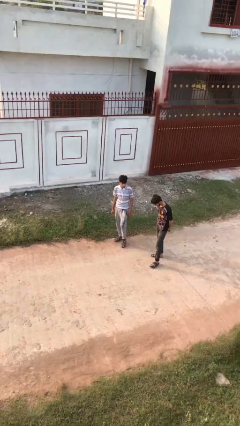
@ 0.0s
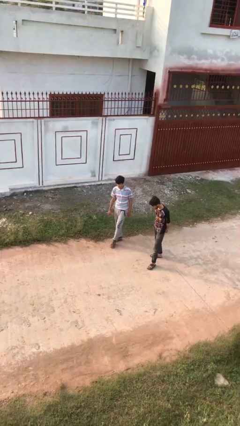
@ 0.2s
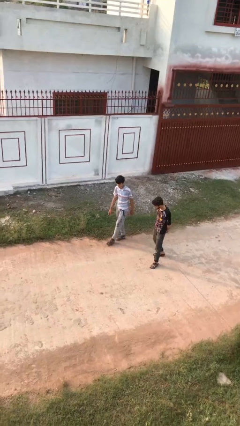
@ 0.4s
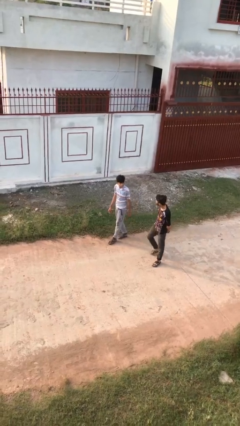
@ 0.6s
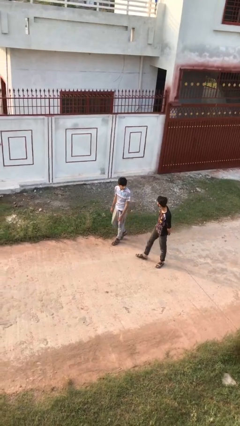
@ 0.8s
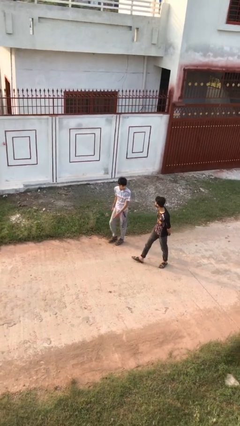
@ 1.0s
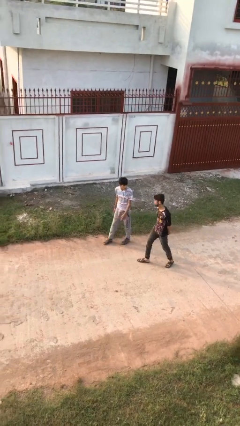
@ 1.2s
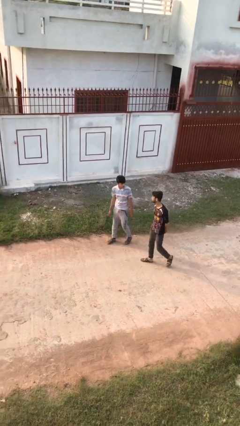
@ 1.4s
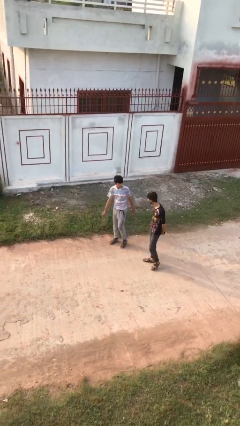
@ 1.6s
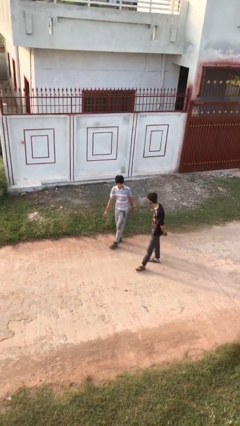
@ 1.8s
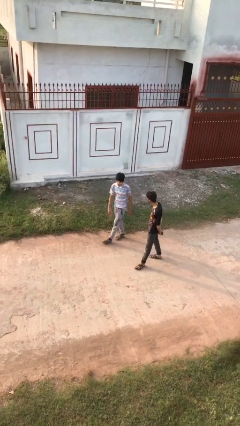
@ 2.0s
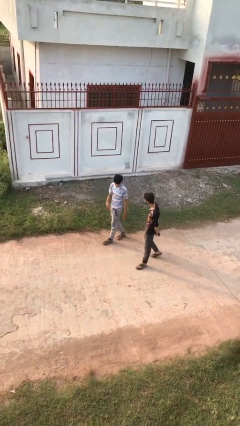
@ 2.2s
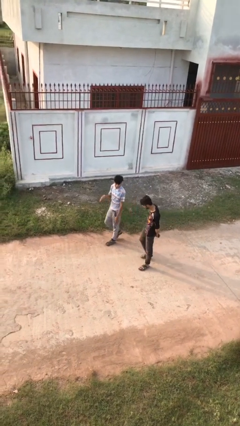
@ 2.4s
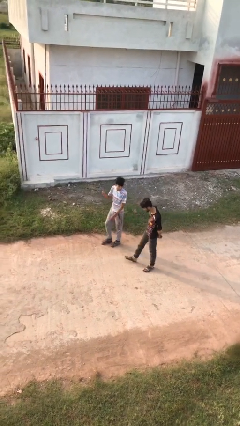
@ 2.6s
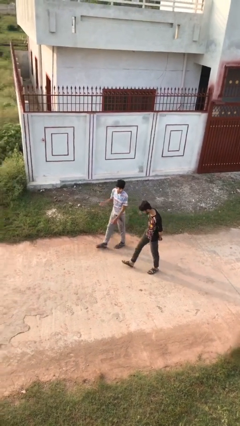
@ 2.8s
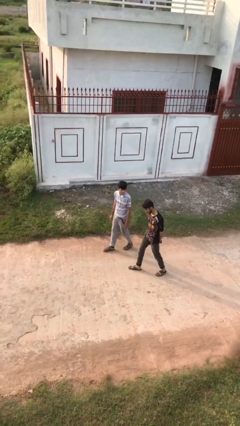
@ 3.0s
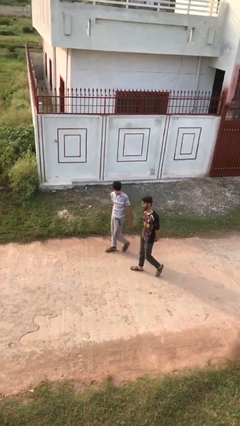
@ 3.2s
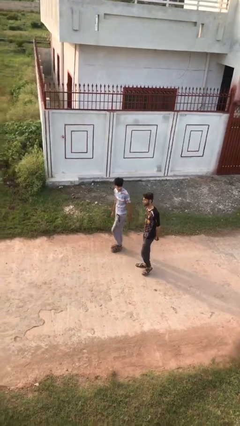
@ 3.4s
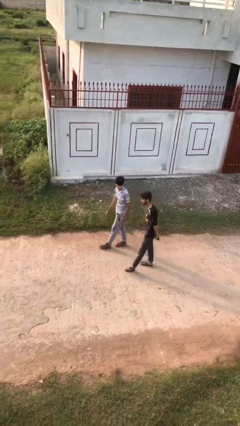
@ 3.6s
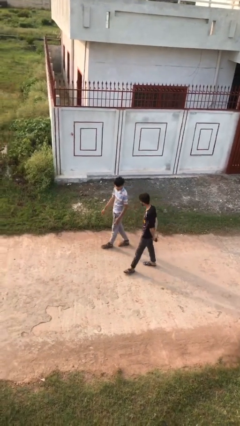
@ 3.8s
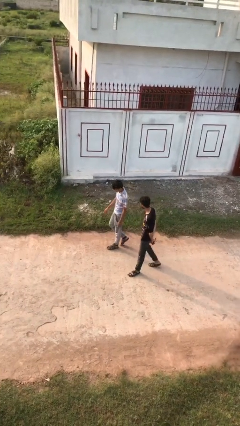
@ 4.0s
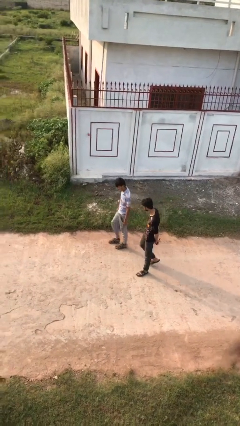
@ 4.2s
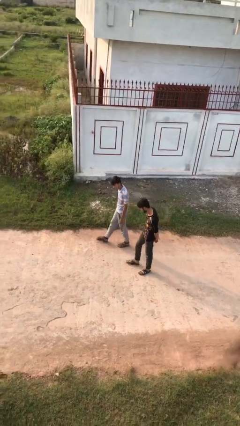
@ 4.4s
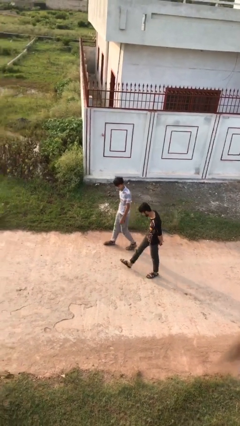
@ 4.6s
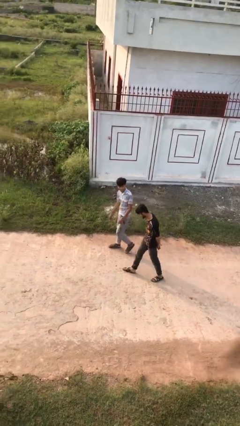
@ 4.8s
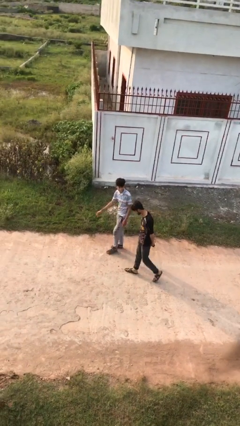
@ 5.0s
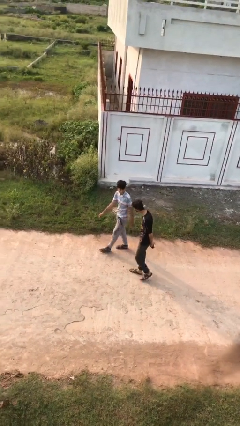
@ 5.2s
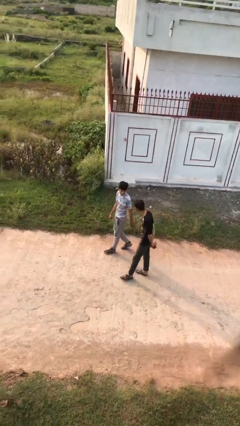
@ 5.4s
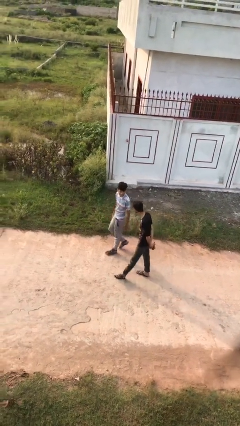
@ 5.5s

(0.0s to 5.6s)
person talks to person

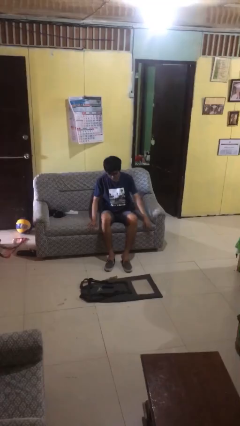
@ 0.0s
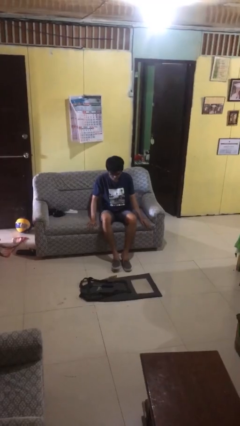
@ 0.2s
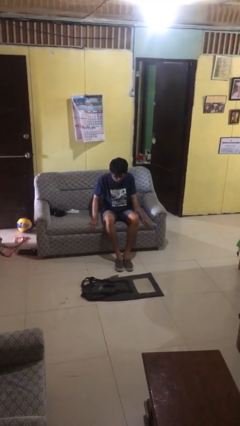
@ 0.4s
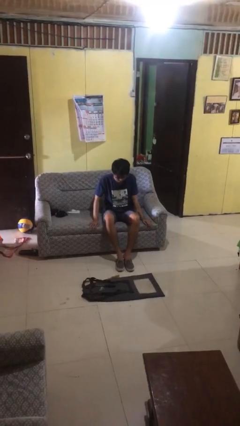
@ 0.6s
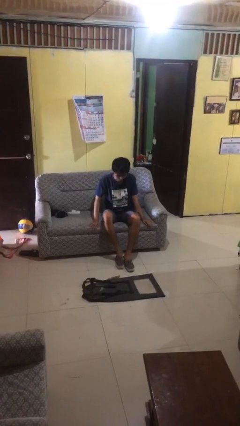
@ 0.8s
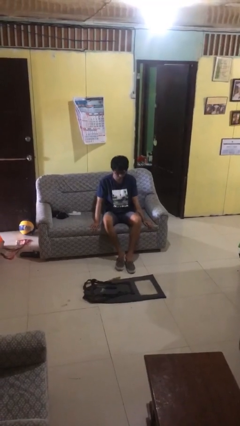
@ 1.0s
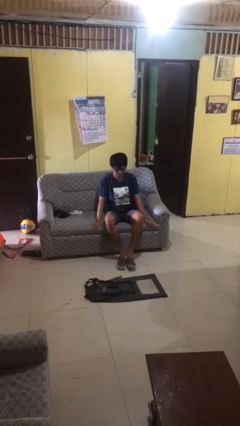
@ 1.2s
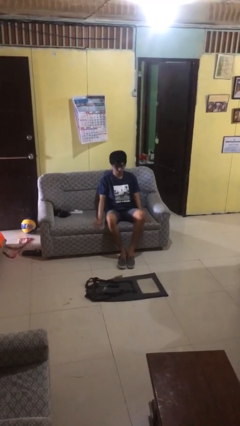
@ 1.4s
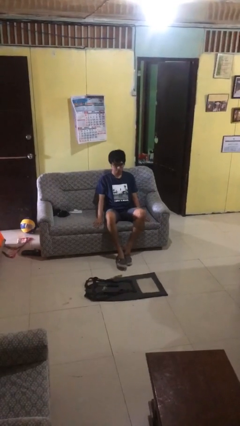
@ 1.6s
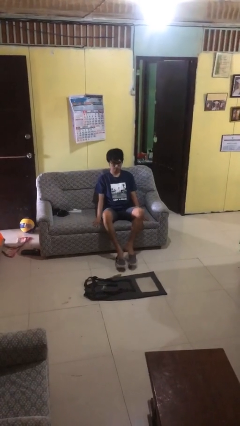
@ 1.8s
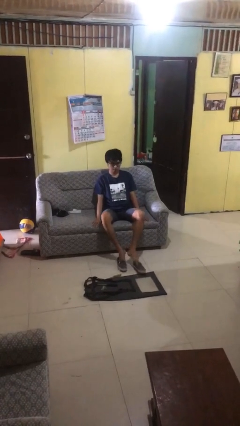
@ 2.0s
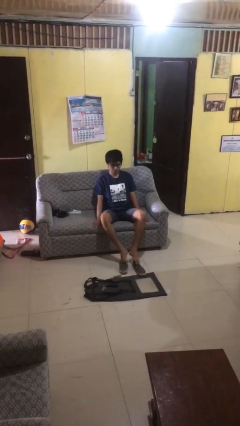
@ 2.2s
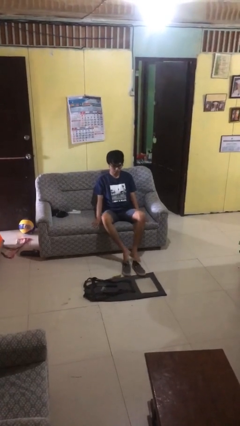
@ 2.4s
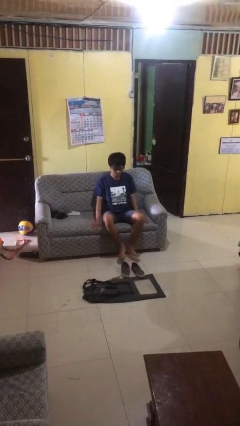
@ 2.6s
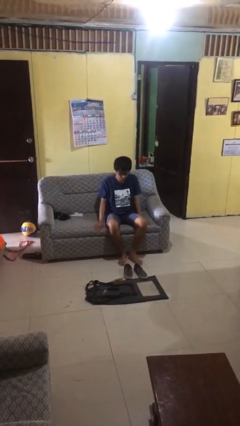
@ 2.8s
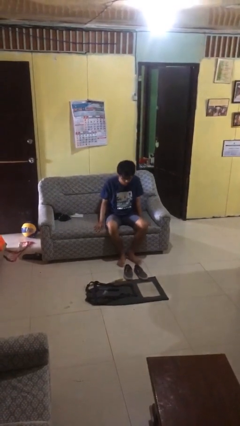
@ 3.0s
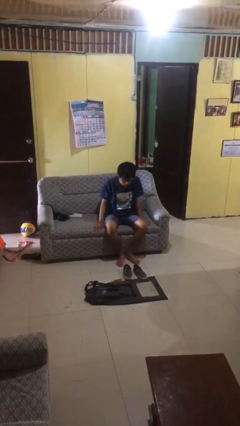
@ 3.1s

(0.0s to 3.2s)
person takes off shoes

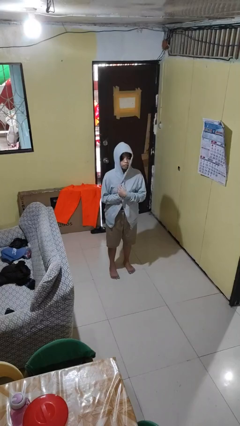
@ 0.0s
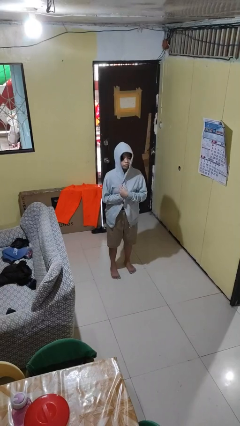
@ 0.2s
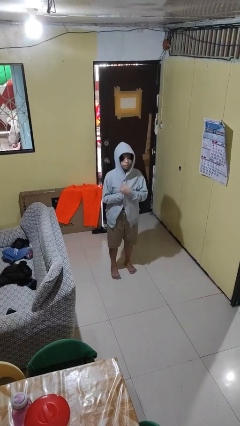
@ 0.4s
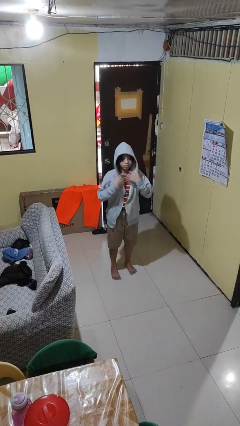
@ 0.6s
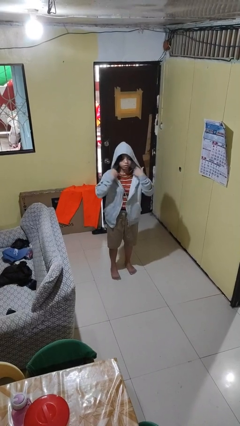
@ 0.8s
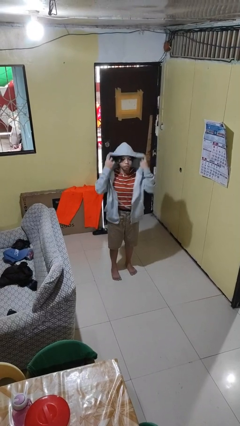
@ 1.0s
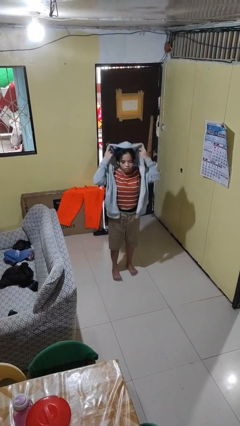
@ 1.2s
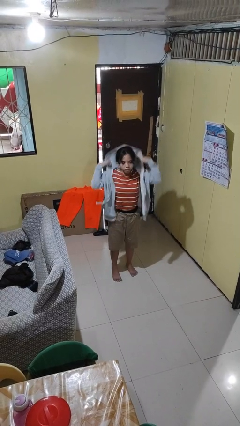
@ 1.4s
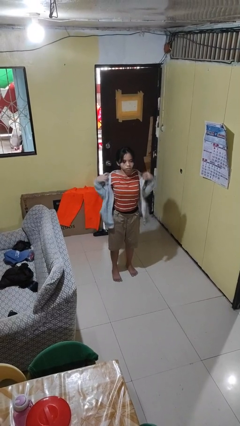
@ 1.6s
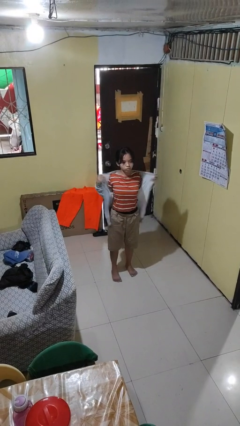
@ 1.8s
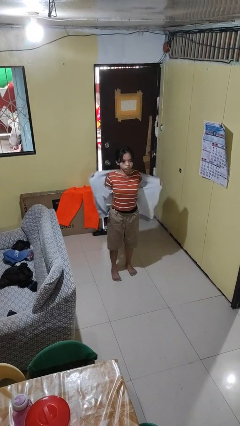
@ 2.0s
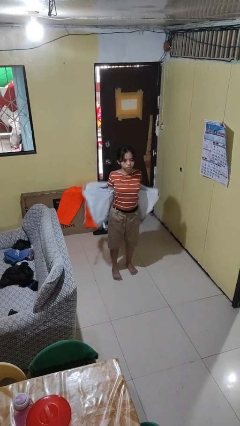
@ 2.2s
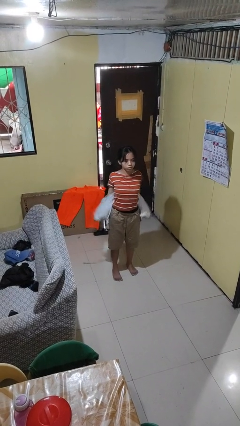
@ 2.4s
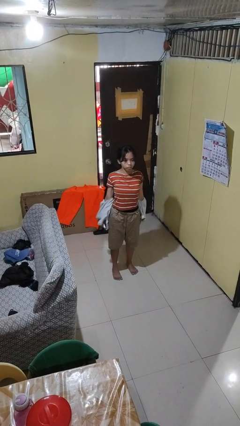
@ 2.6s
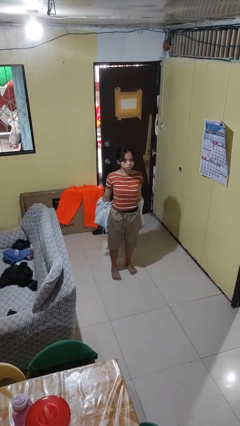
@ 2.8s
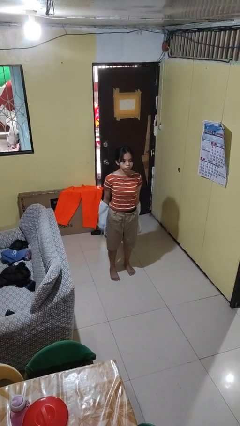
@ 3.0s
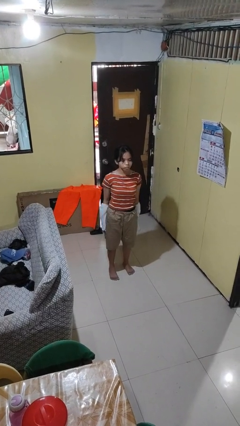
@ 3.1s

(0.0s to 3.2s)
person takes off hoodie

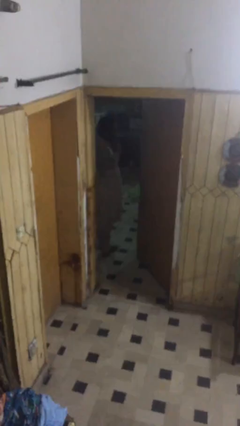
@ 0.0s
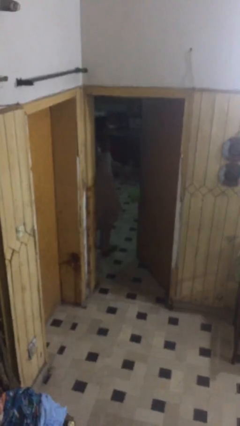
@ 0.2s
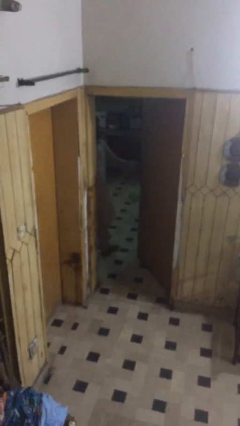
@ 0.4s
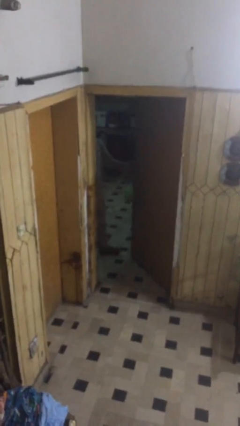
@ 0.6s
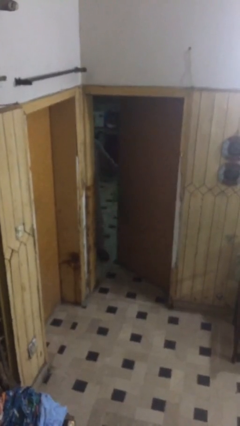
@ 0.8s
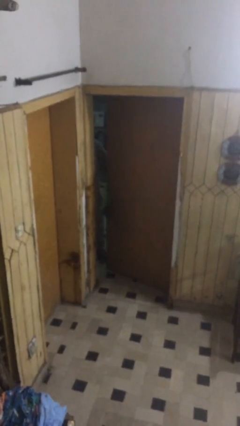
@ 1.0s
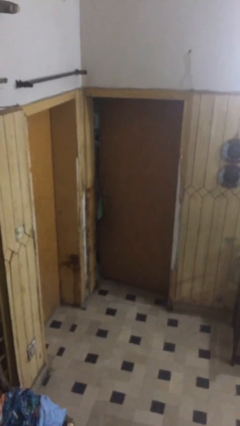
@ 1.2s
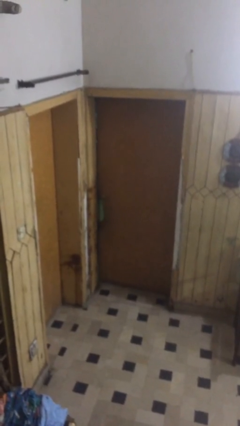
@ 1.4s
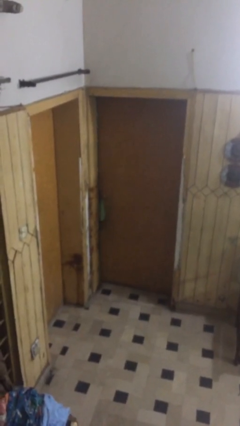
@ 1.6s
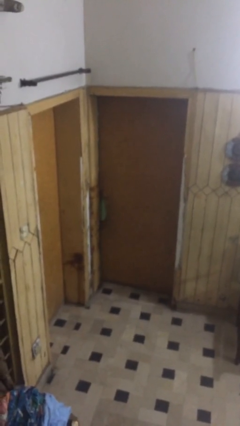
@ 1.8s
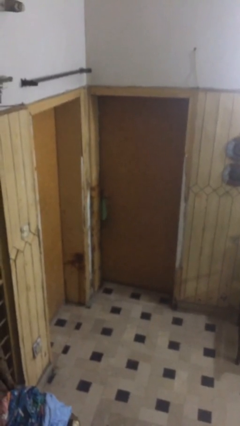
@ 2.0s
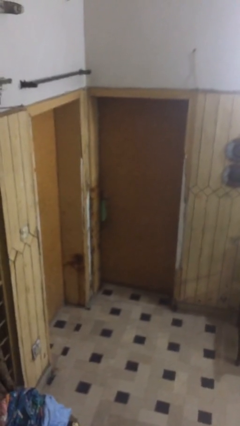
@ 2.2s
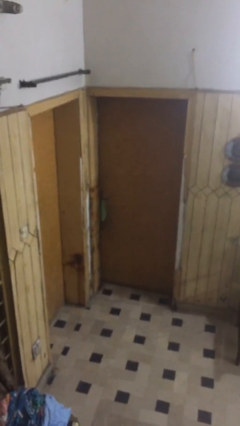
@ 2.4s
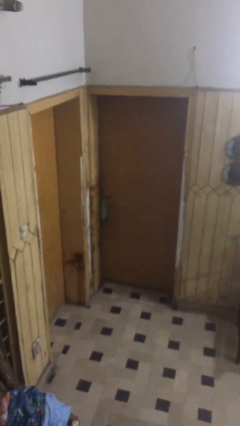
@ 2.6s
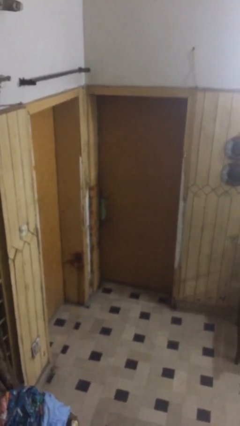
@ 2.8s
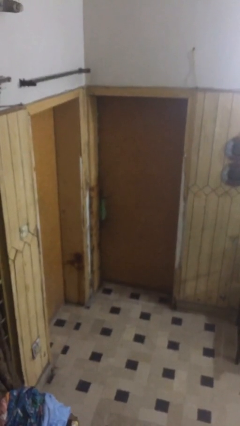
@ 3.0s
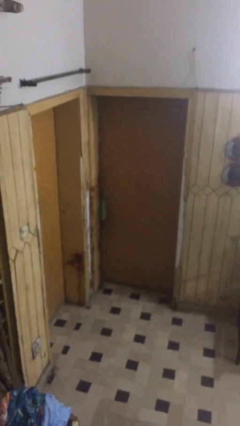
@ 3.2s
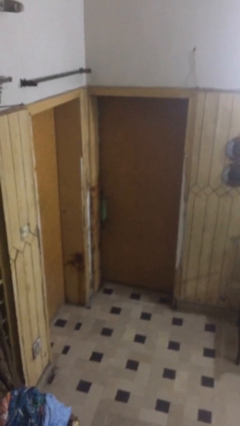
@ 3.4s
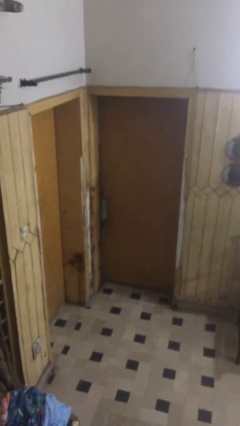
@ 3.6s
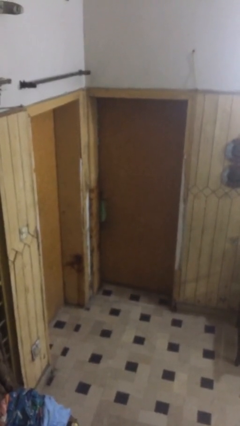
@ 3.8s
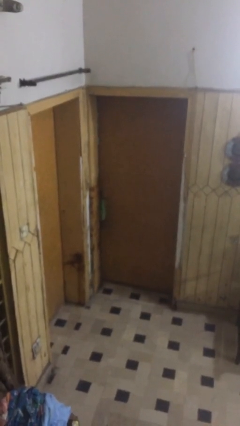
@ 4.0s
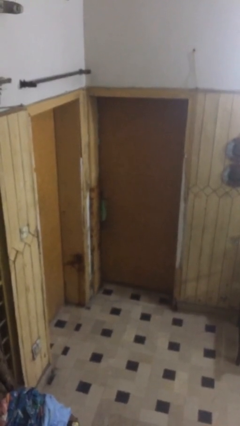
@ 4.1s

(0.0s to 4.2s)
person closes facility door

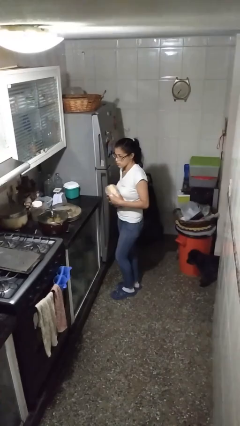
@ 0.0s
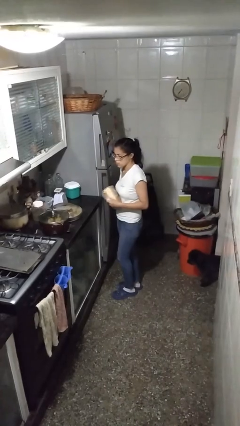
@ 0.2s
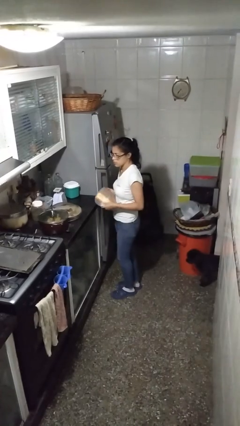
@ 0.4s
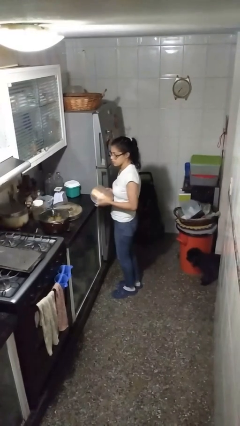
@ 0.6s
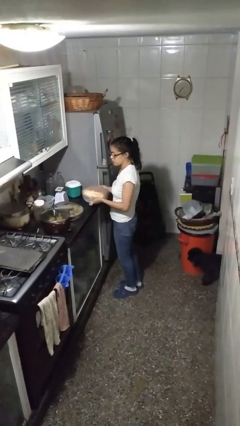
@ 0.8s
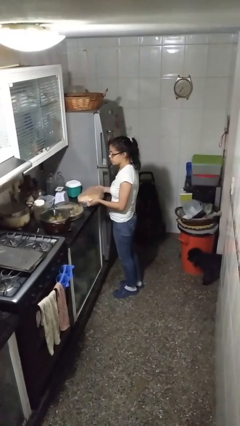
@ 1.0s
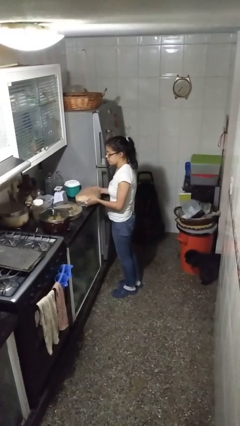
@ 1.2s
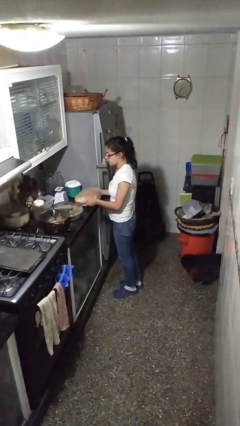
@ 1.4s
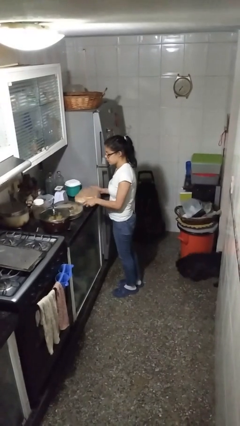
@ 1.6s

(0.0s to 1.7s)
person puts down object on countertop
